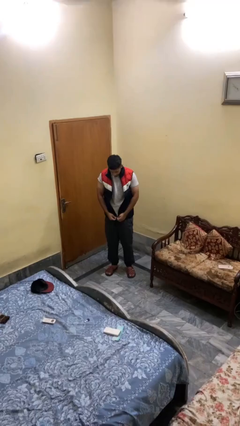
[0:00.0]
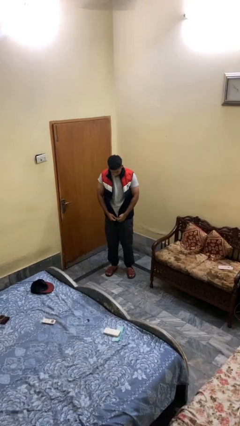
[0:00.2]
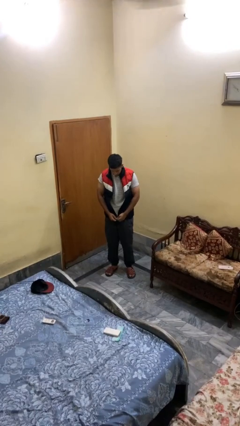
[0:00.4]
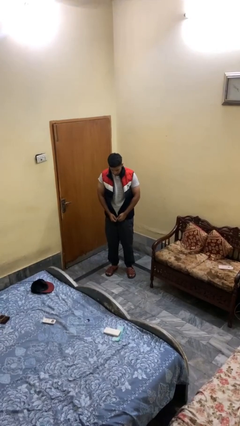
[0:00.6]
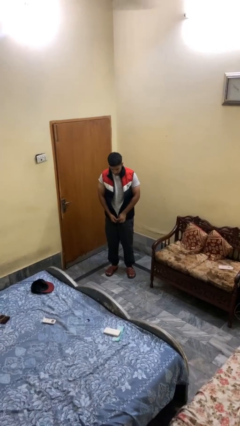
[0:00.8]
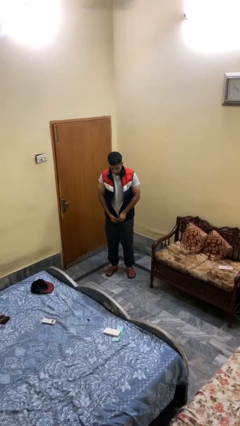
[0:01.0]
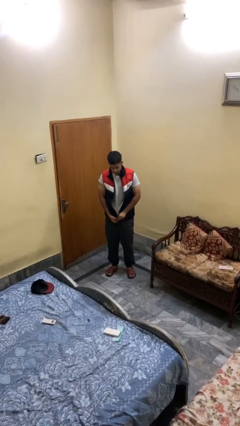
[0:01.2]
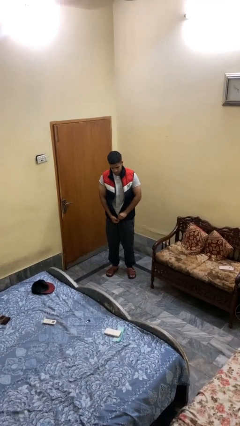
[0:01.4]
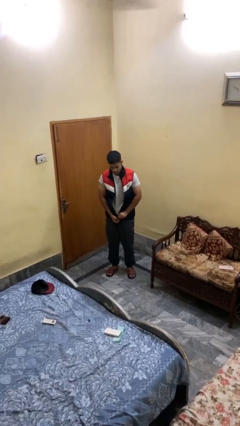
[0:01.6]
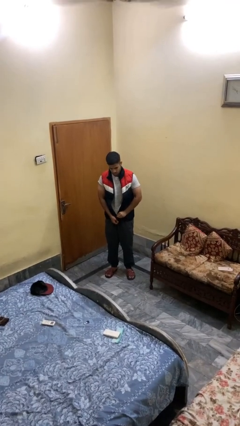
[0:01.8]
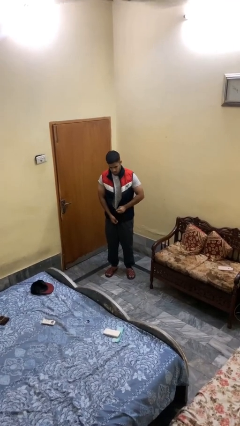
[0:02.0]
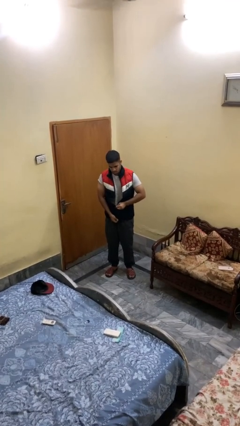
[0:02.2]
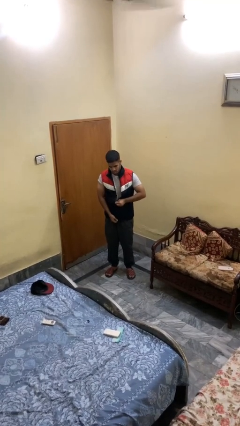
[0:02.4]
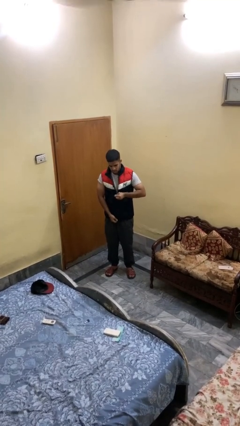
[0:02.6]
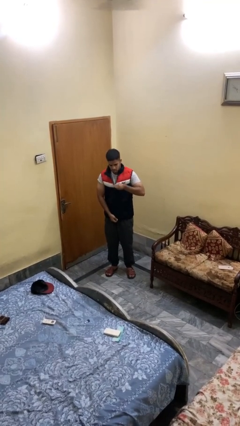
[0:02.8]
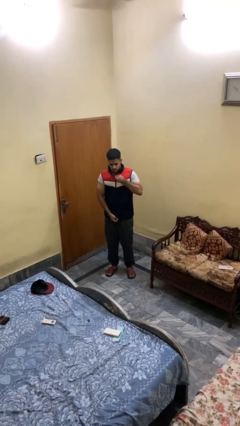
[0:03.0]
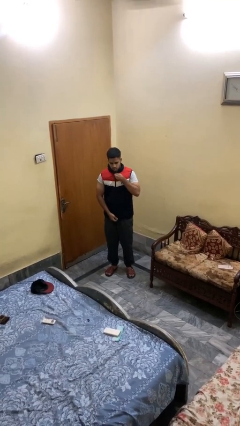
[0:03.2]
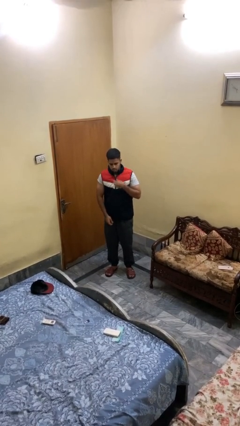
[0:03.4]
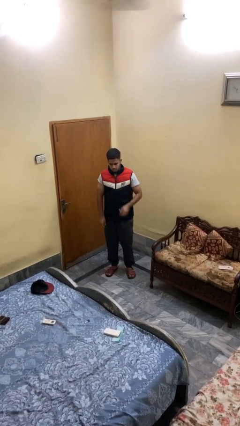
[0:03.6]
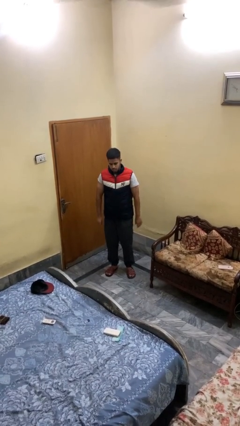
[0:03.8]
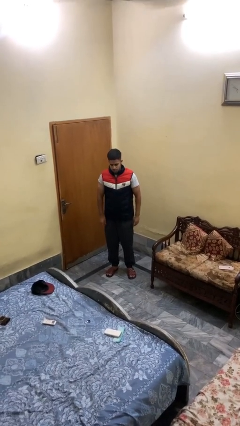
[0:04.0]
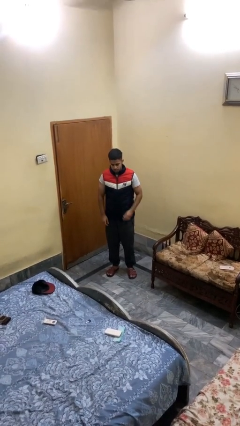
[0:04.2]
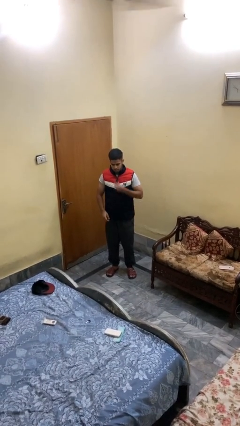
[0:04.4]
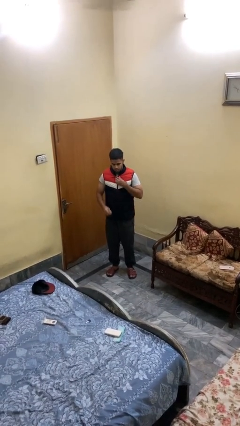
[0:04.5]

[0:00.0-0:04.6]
person zips up jacket

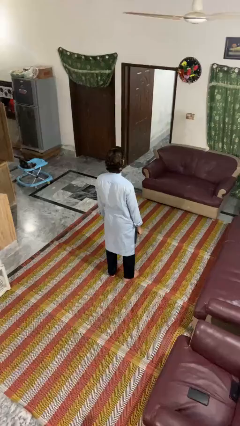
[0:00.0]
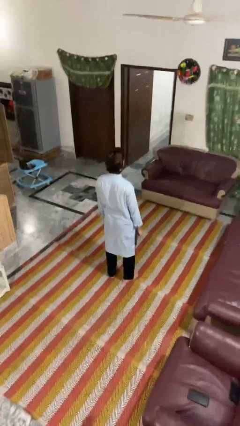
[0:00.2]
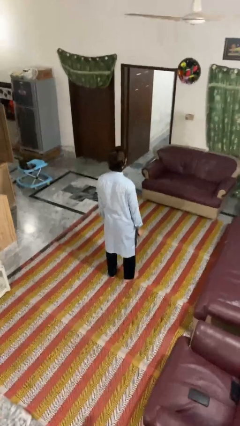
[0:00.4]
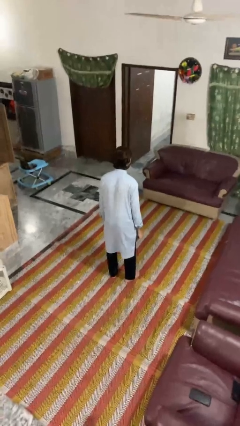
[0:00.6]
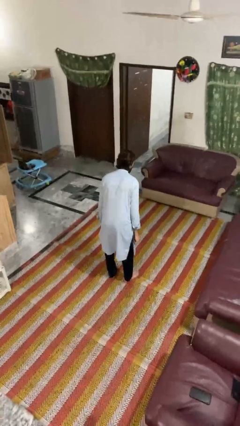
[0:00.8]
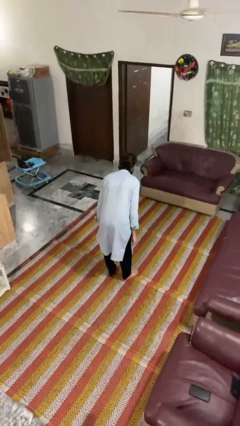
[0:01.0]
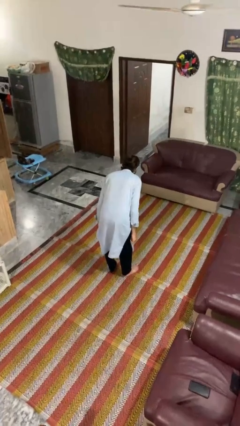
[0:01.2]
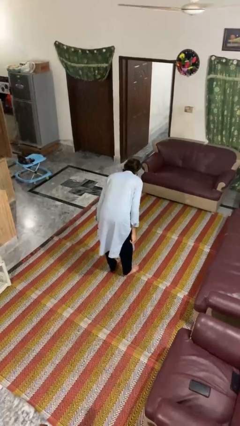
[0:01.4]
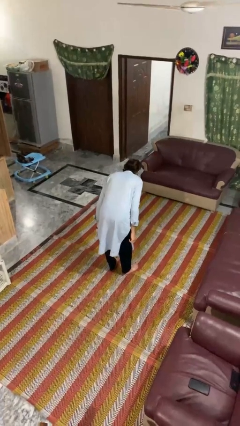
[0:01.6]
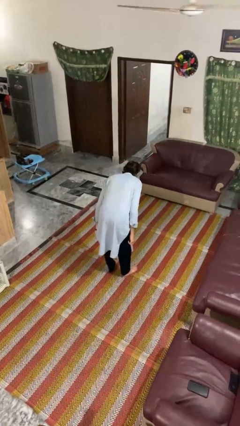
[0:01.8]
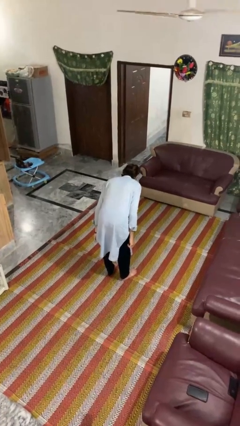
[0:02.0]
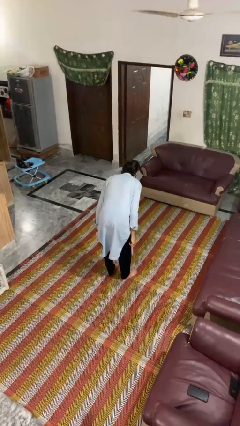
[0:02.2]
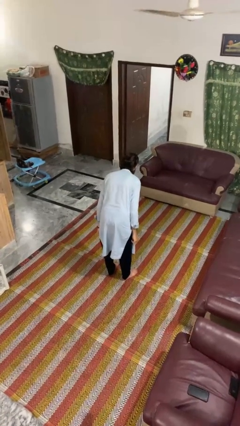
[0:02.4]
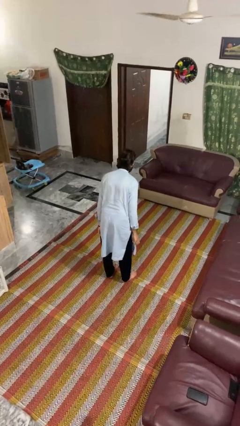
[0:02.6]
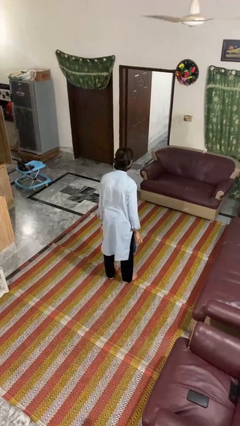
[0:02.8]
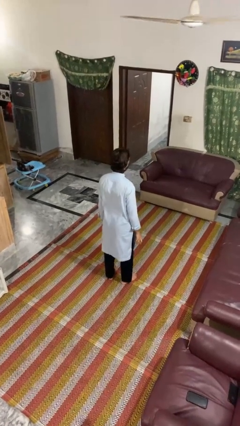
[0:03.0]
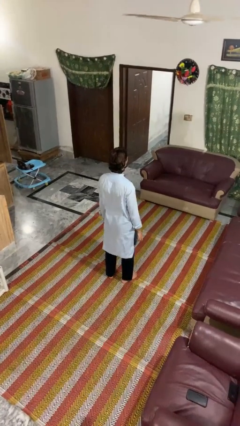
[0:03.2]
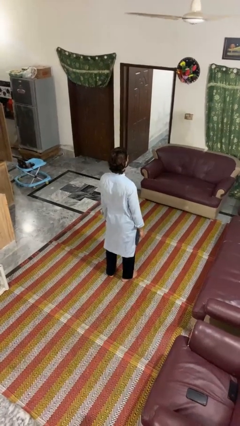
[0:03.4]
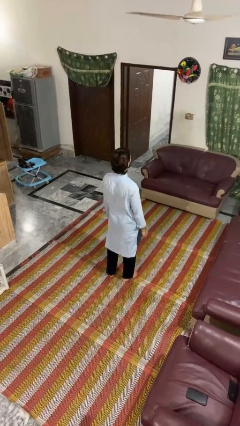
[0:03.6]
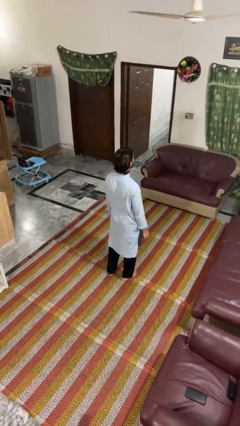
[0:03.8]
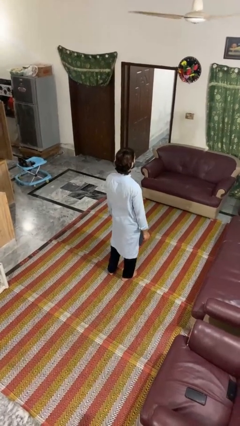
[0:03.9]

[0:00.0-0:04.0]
person bows

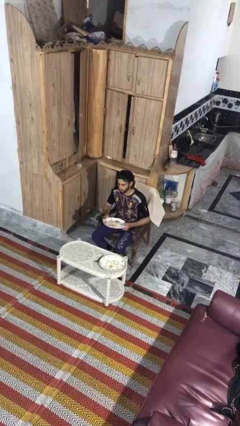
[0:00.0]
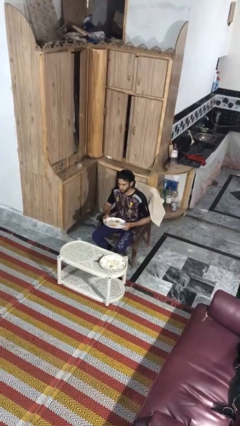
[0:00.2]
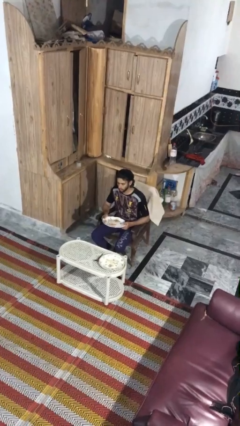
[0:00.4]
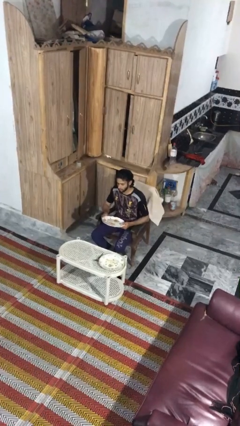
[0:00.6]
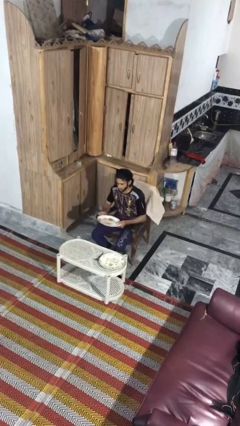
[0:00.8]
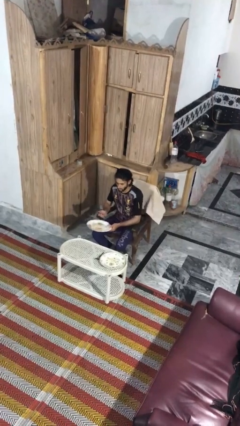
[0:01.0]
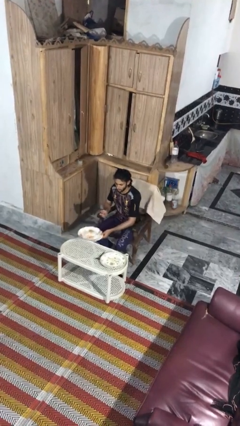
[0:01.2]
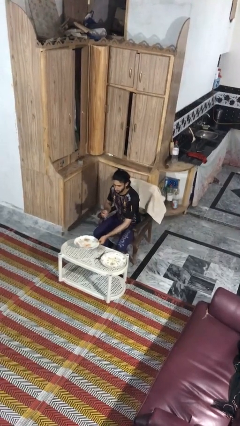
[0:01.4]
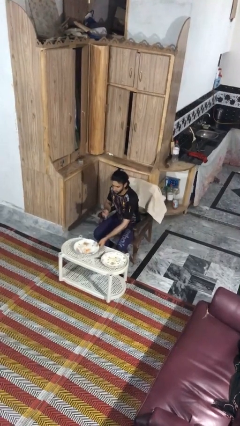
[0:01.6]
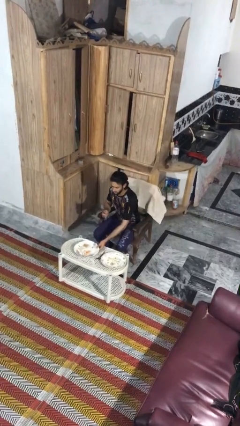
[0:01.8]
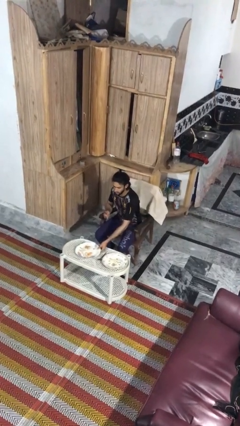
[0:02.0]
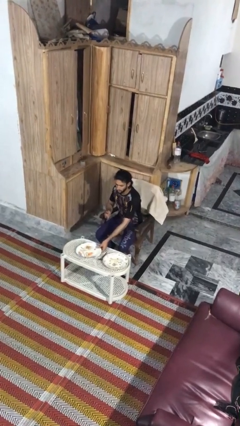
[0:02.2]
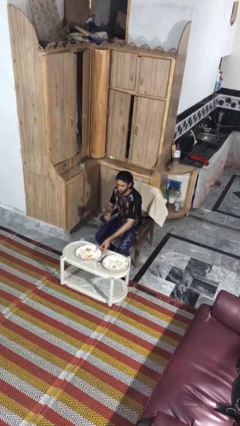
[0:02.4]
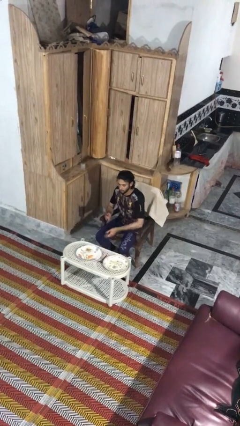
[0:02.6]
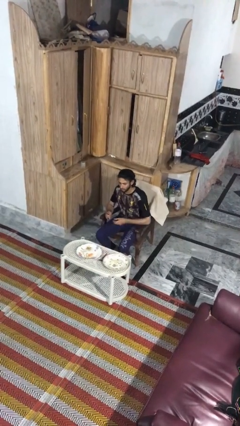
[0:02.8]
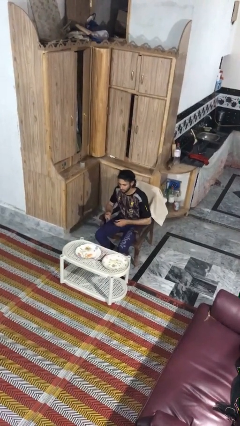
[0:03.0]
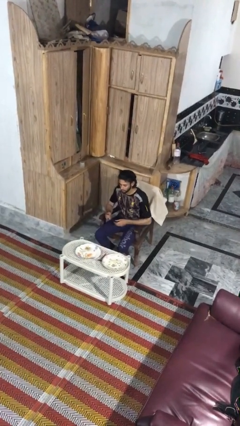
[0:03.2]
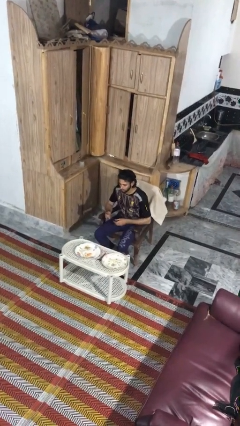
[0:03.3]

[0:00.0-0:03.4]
person sets table

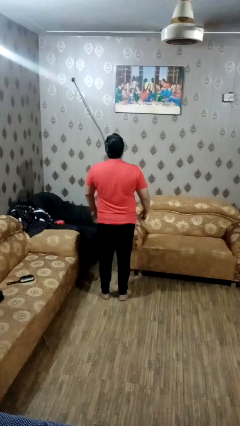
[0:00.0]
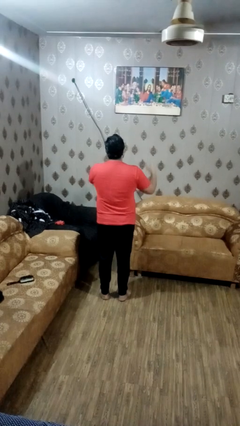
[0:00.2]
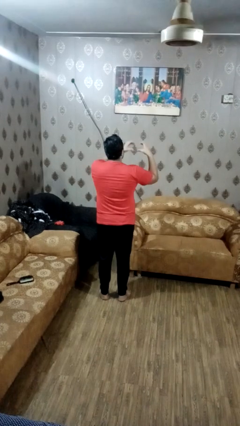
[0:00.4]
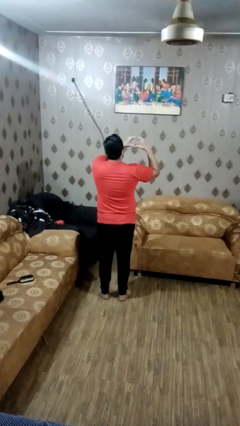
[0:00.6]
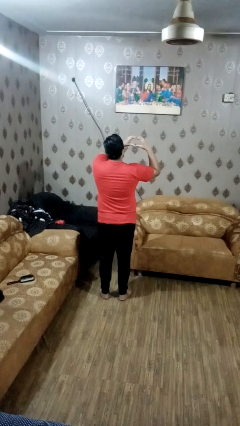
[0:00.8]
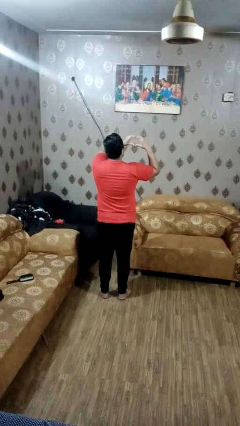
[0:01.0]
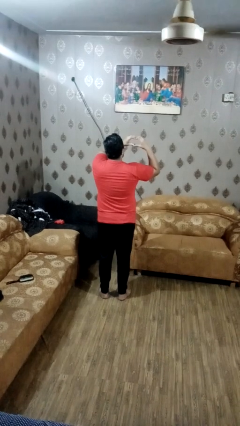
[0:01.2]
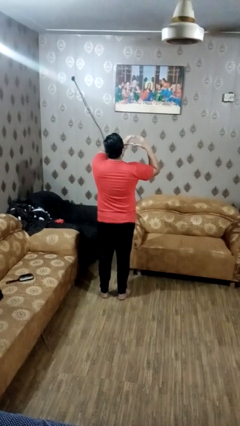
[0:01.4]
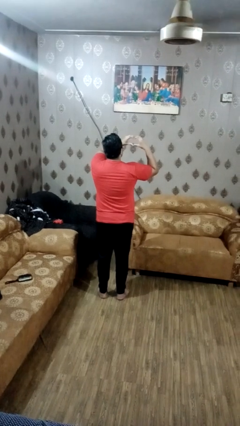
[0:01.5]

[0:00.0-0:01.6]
person gestures heart

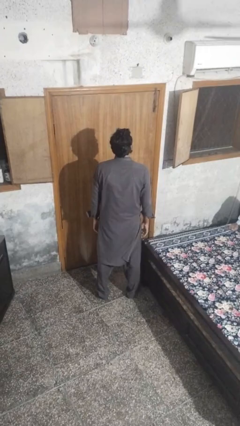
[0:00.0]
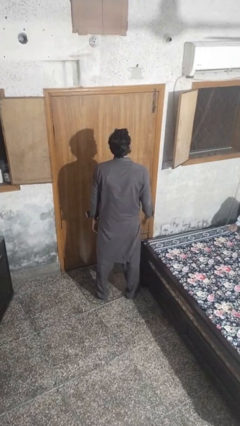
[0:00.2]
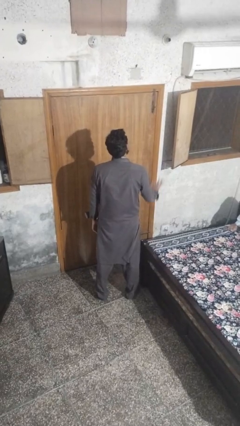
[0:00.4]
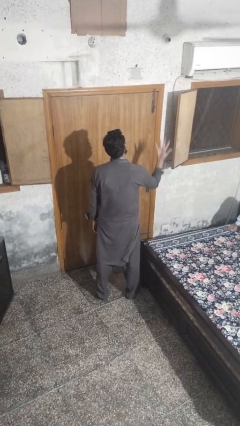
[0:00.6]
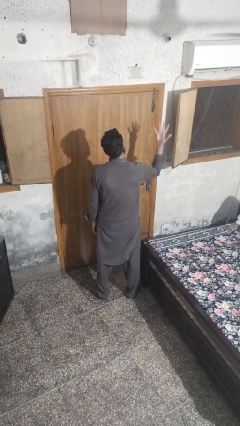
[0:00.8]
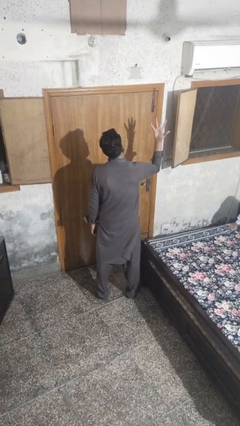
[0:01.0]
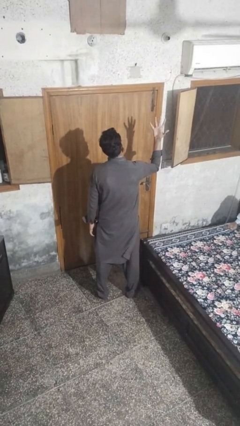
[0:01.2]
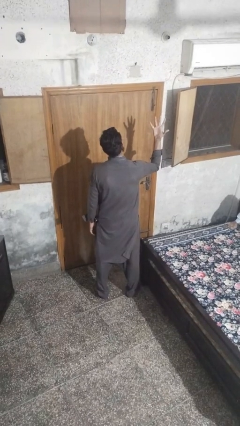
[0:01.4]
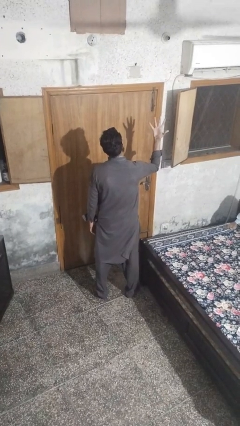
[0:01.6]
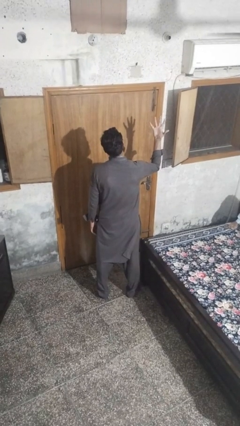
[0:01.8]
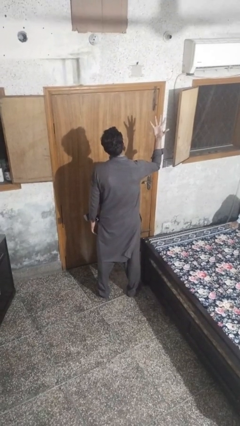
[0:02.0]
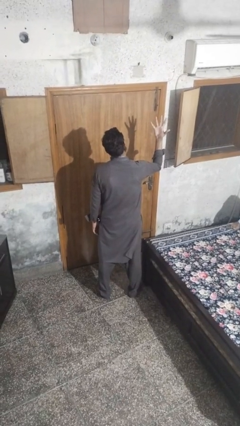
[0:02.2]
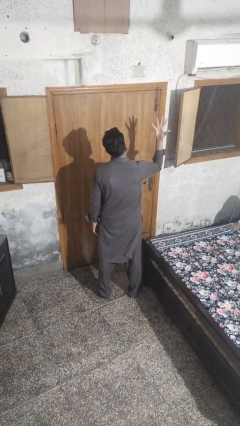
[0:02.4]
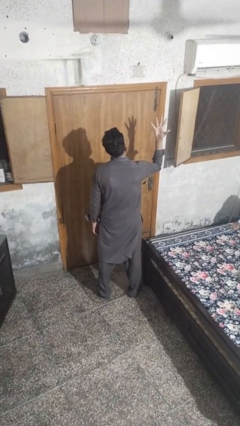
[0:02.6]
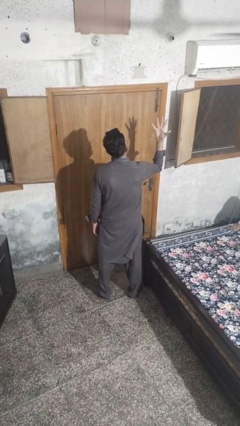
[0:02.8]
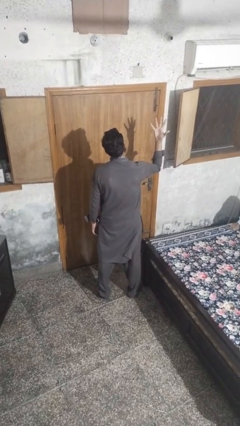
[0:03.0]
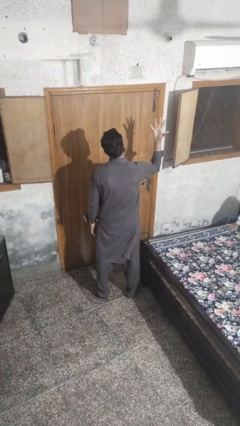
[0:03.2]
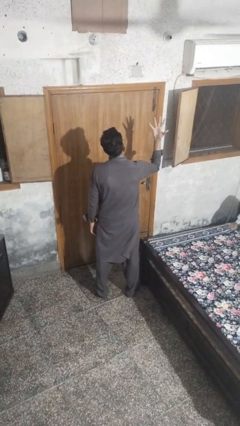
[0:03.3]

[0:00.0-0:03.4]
person gestures number five

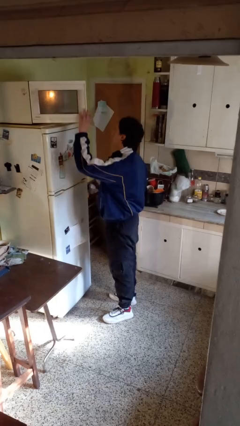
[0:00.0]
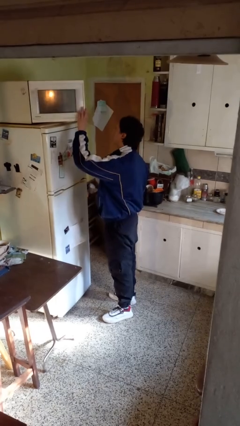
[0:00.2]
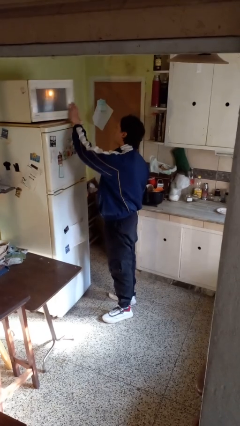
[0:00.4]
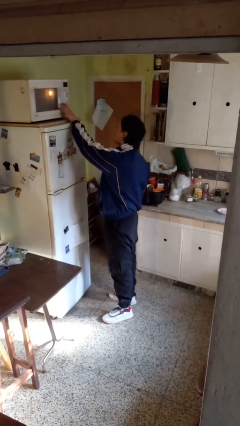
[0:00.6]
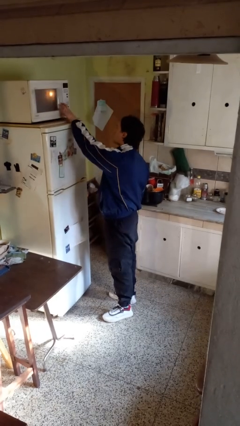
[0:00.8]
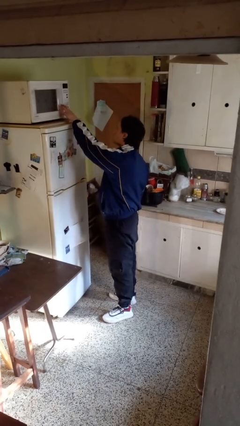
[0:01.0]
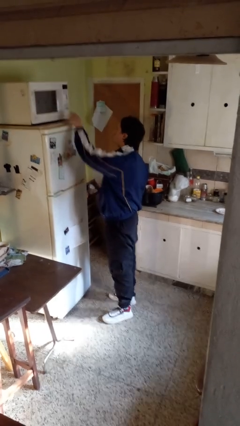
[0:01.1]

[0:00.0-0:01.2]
person closes microwave
